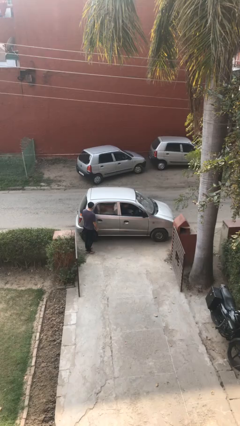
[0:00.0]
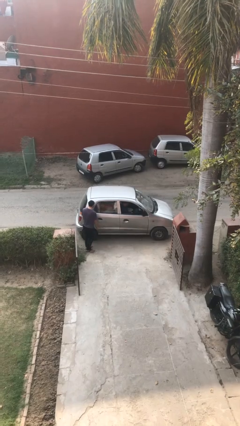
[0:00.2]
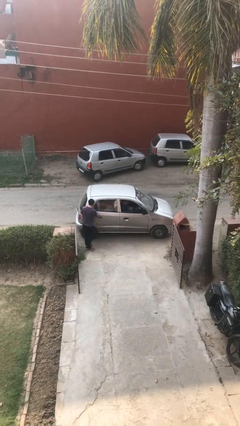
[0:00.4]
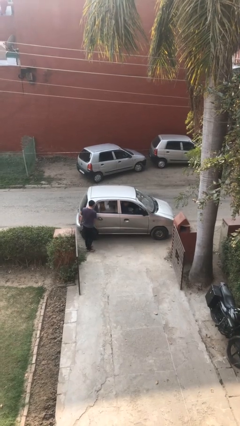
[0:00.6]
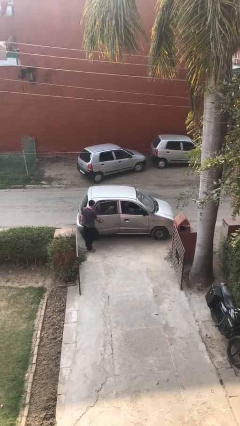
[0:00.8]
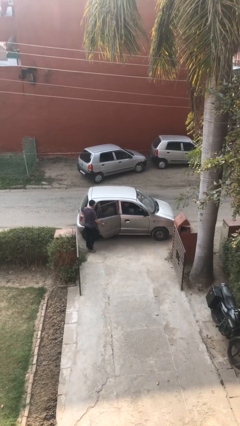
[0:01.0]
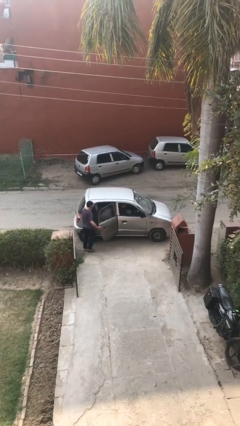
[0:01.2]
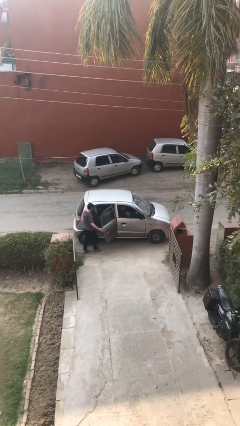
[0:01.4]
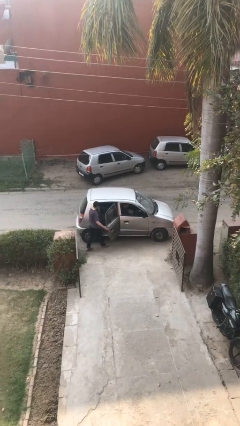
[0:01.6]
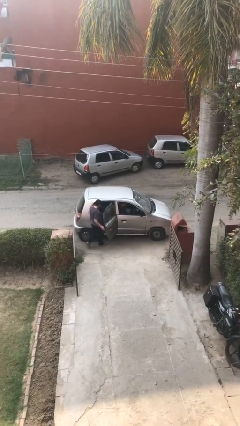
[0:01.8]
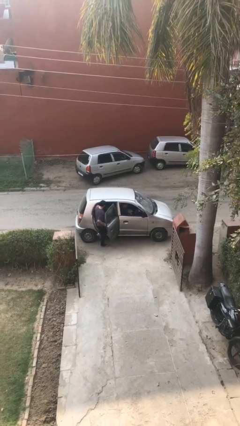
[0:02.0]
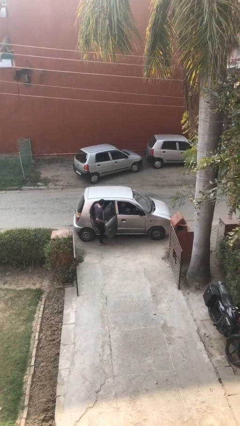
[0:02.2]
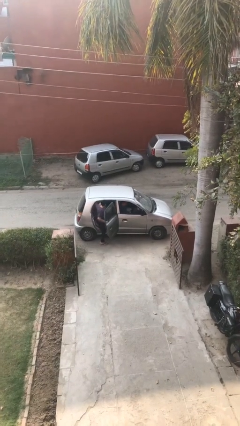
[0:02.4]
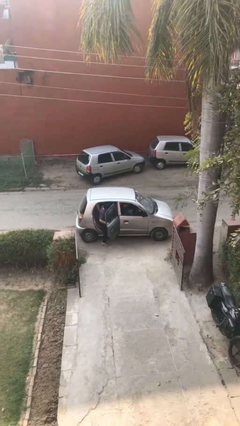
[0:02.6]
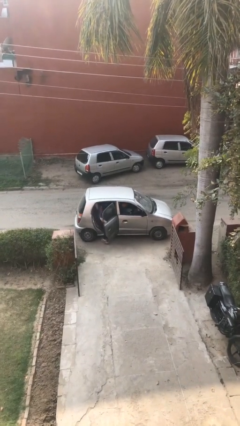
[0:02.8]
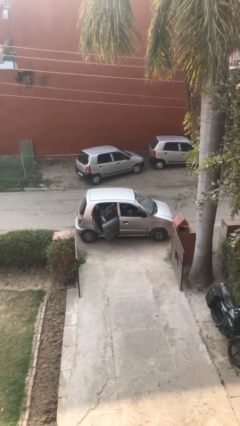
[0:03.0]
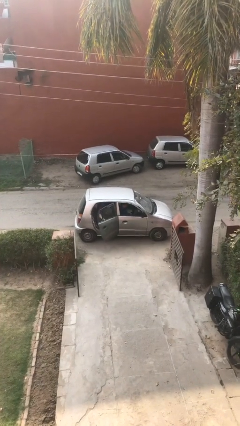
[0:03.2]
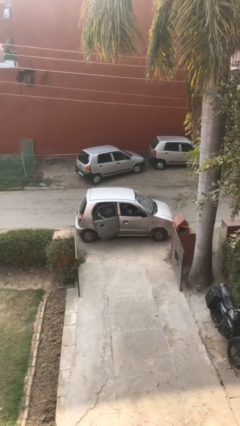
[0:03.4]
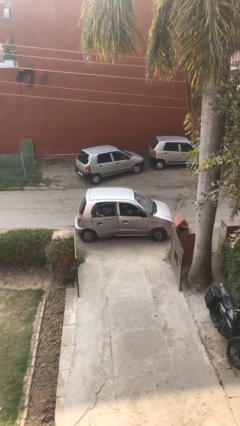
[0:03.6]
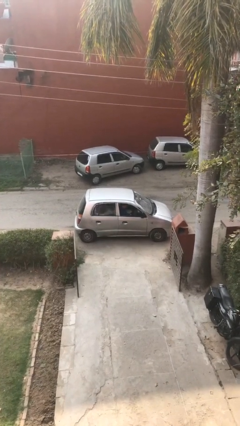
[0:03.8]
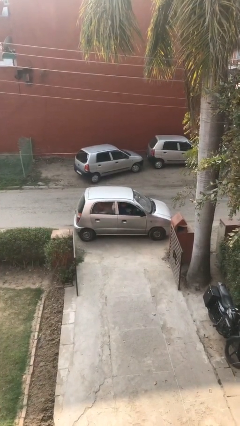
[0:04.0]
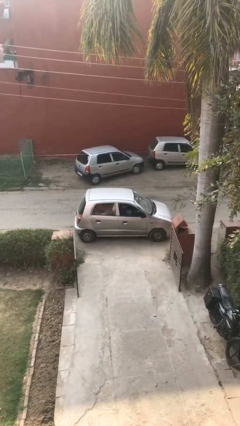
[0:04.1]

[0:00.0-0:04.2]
car picks up person

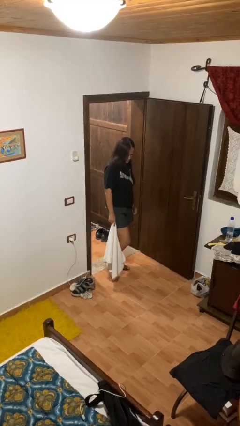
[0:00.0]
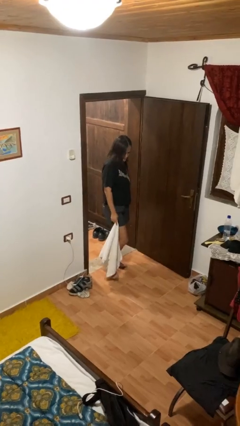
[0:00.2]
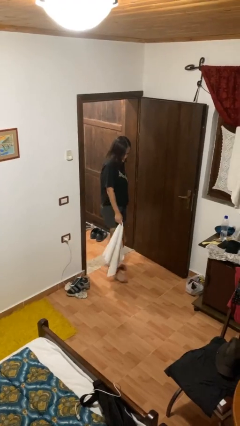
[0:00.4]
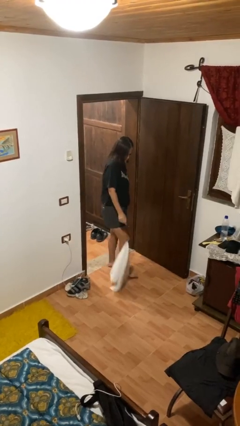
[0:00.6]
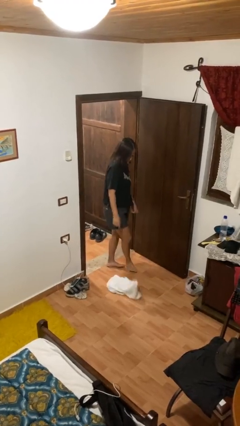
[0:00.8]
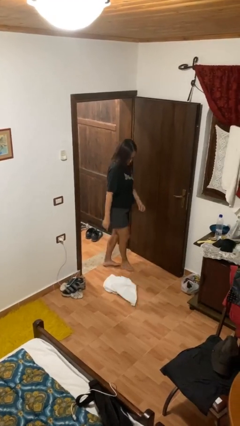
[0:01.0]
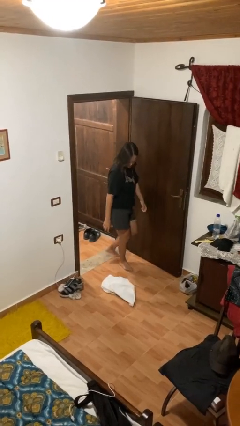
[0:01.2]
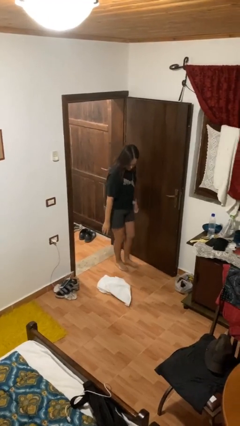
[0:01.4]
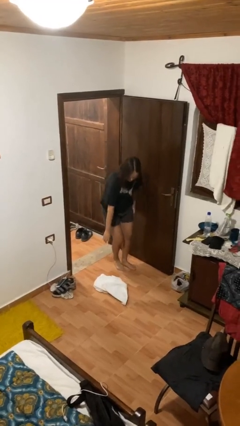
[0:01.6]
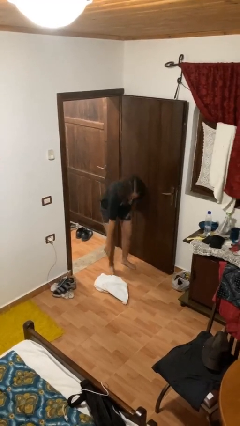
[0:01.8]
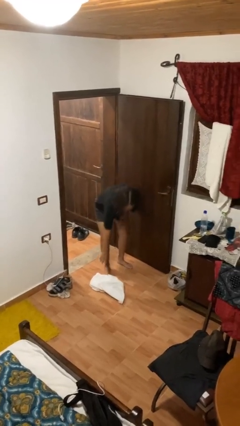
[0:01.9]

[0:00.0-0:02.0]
person drops object

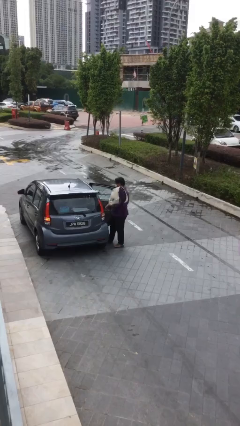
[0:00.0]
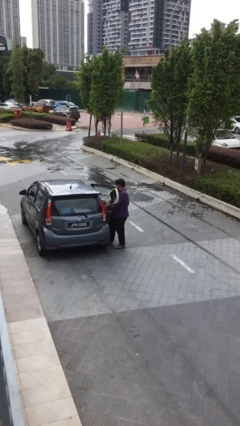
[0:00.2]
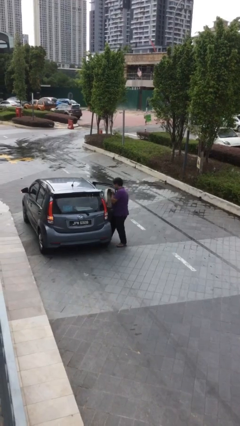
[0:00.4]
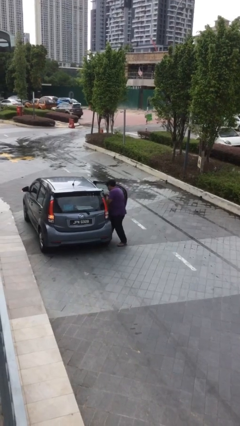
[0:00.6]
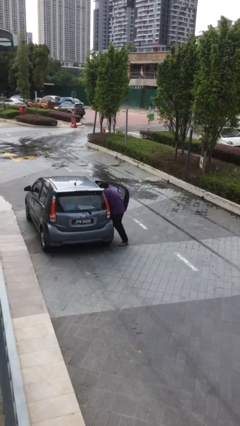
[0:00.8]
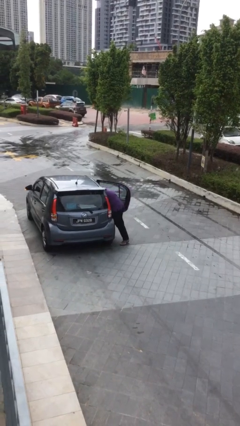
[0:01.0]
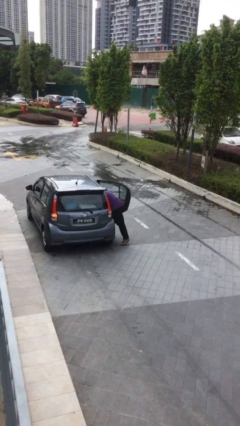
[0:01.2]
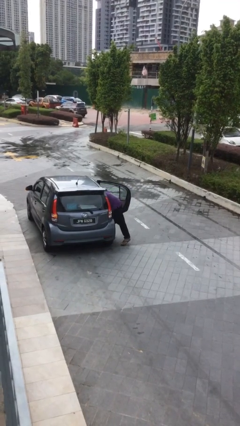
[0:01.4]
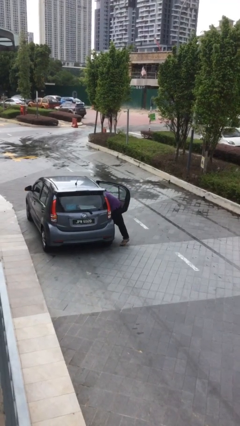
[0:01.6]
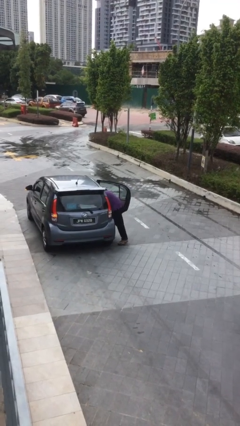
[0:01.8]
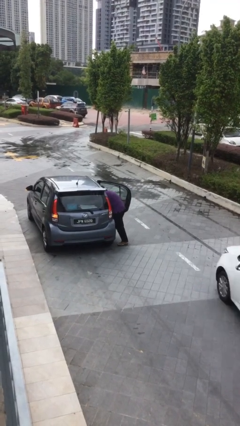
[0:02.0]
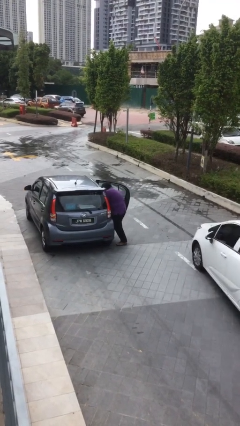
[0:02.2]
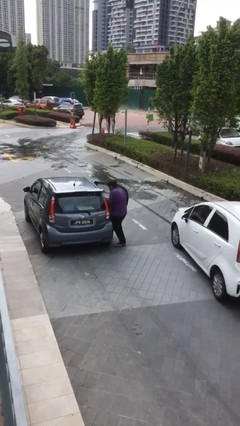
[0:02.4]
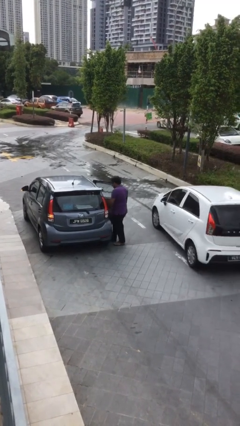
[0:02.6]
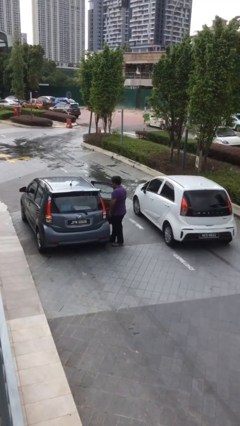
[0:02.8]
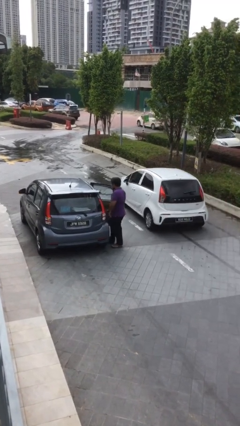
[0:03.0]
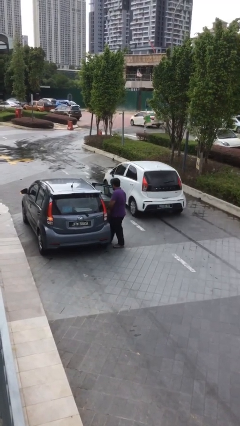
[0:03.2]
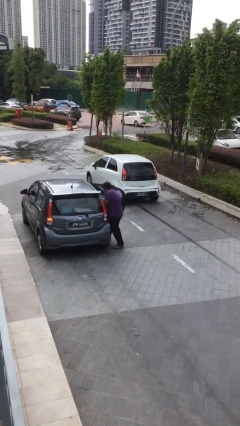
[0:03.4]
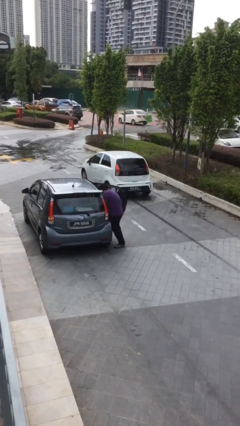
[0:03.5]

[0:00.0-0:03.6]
person loads car

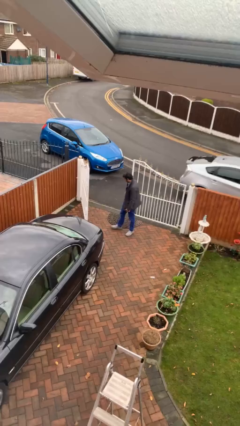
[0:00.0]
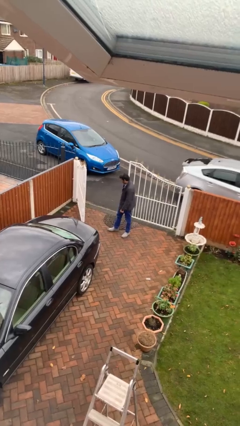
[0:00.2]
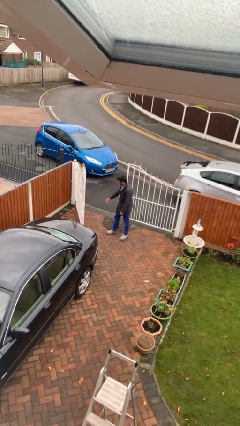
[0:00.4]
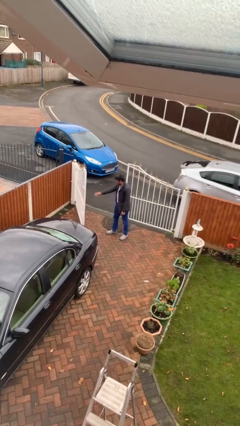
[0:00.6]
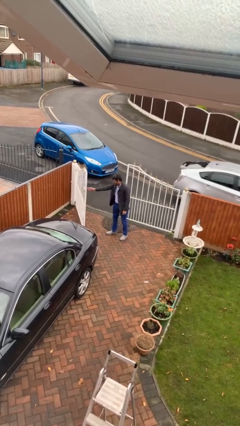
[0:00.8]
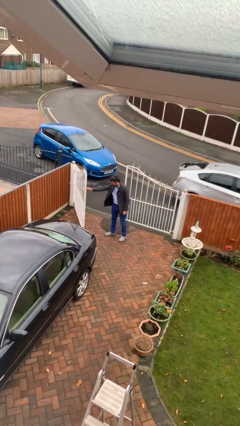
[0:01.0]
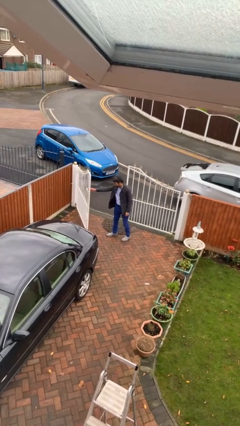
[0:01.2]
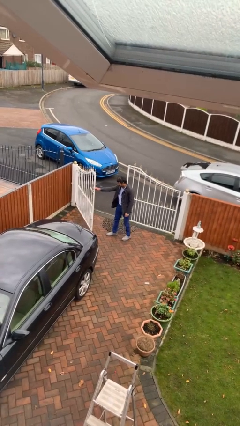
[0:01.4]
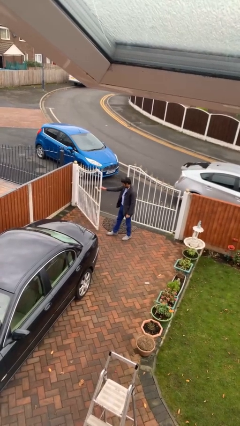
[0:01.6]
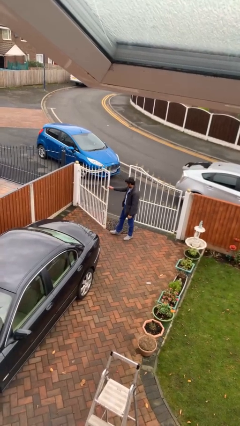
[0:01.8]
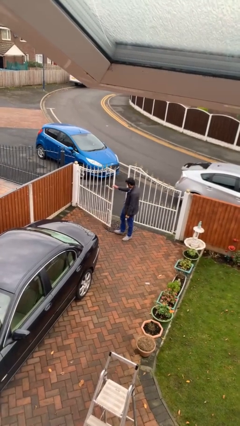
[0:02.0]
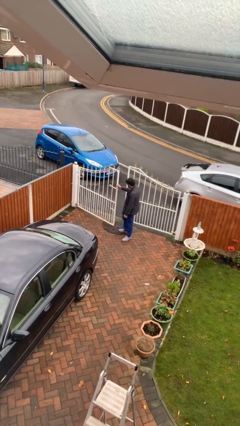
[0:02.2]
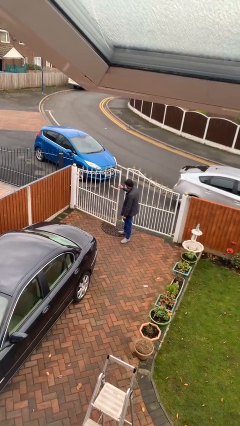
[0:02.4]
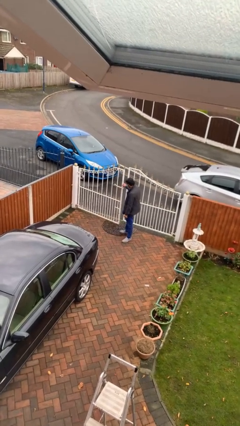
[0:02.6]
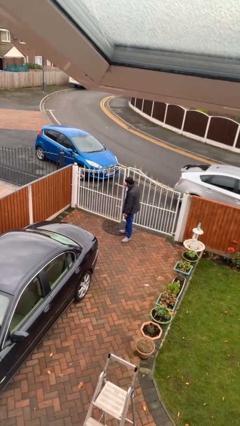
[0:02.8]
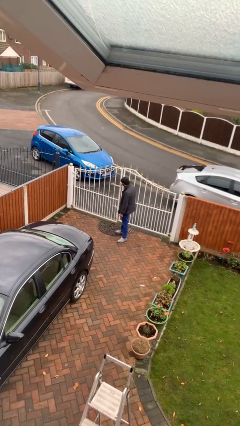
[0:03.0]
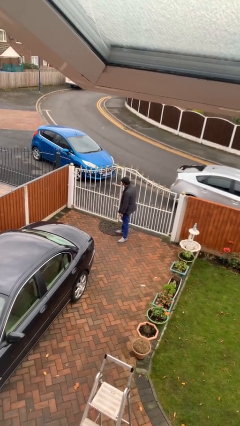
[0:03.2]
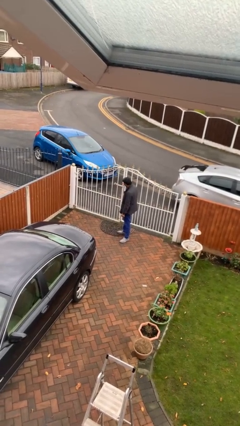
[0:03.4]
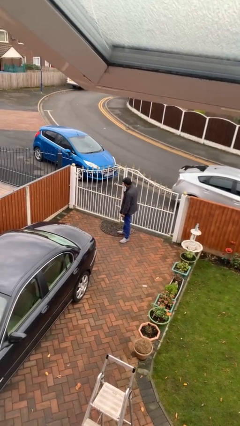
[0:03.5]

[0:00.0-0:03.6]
person closes facility door

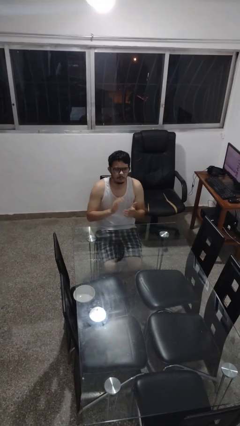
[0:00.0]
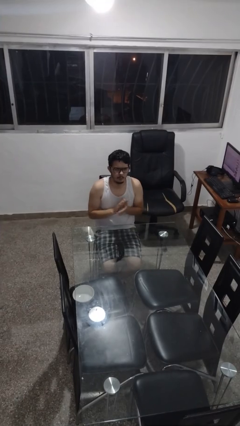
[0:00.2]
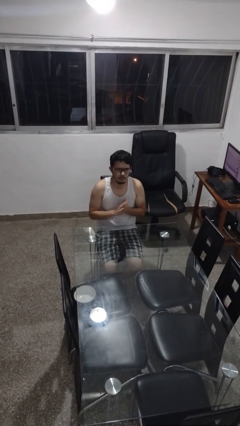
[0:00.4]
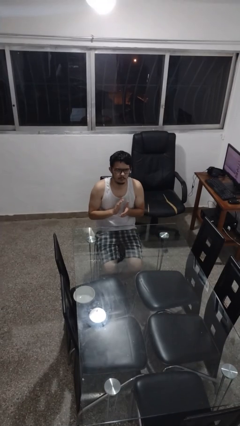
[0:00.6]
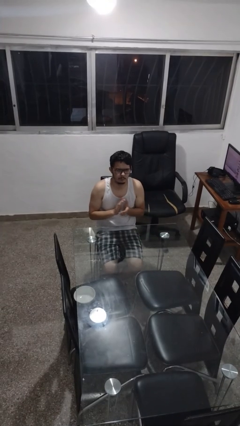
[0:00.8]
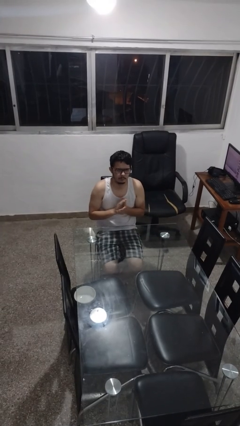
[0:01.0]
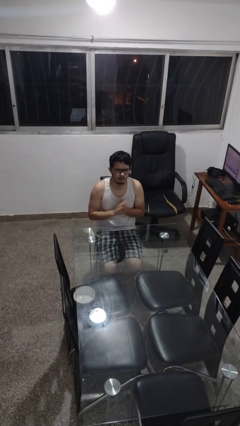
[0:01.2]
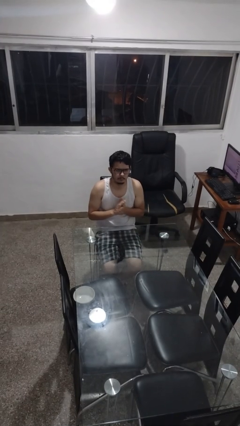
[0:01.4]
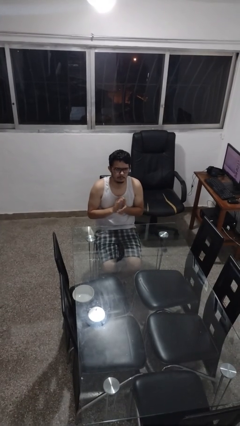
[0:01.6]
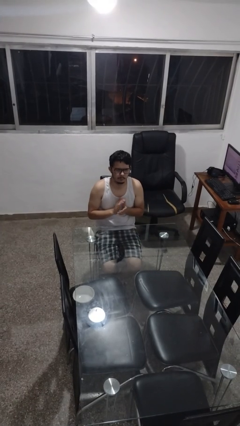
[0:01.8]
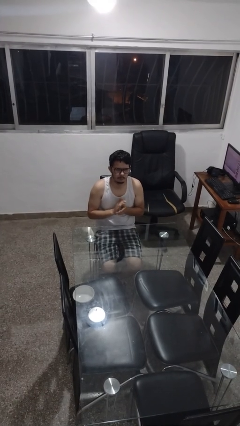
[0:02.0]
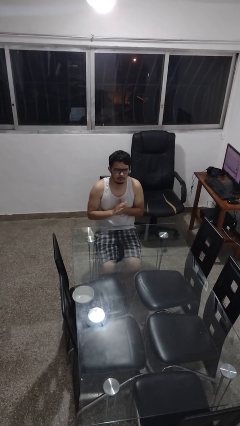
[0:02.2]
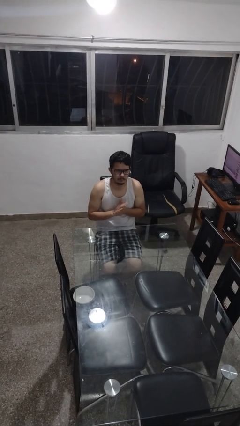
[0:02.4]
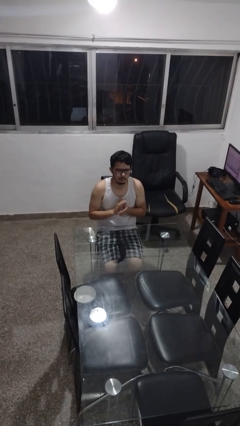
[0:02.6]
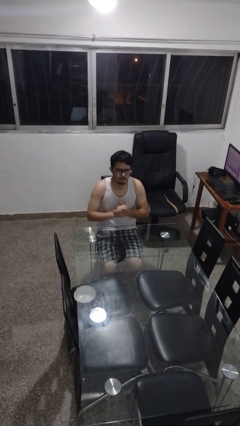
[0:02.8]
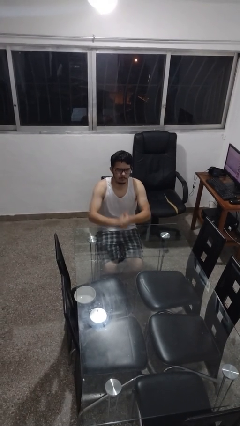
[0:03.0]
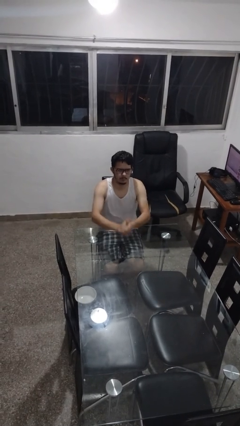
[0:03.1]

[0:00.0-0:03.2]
person claps hands

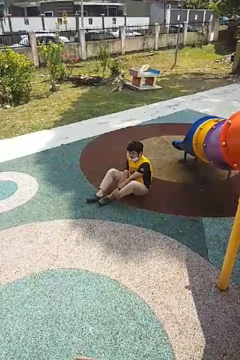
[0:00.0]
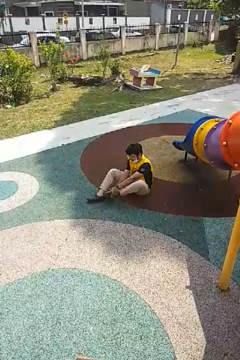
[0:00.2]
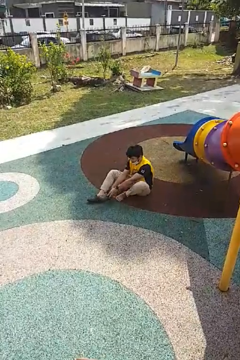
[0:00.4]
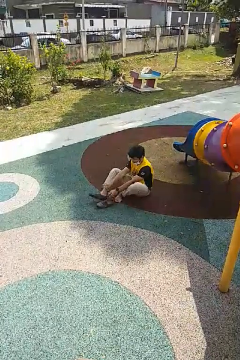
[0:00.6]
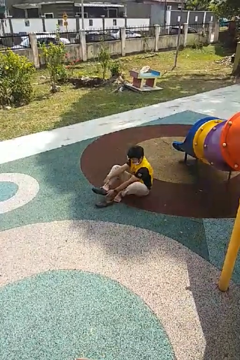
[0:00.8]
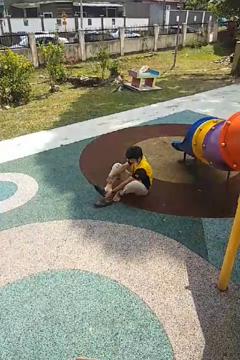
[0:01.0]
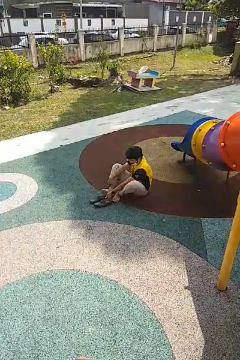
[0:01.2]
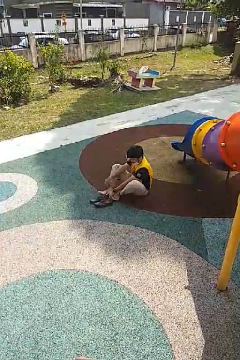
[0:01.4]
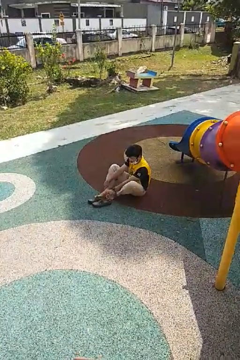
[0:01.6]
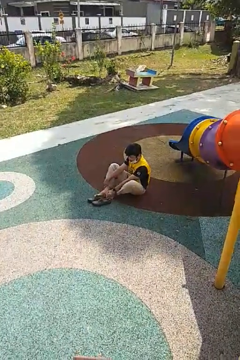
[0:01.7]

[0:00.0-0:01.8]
person takes off shoes
